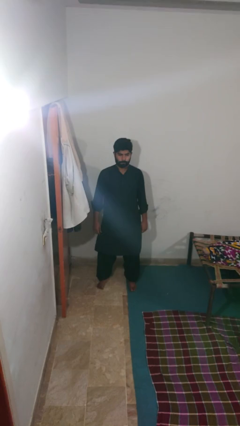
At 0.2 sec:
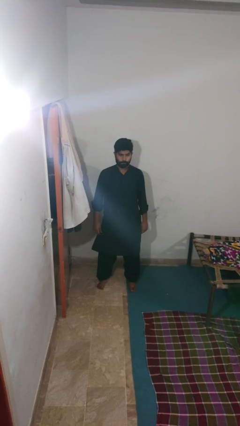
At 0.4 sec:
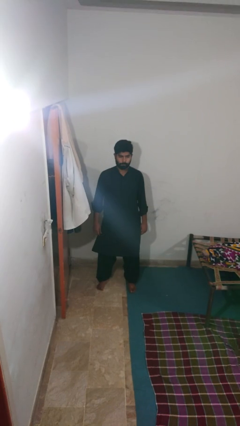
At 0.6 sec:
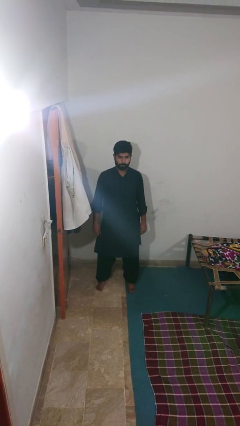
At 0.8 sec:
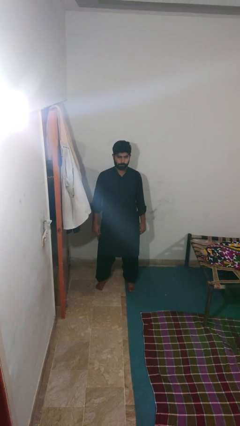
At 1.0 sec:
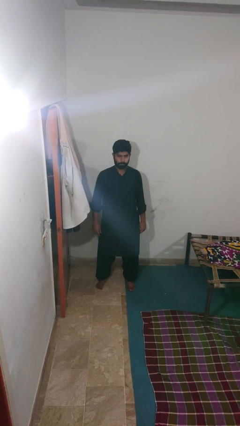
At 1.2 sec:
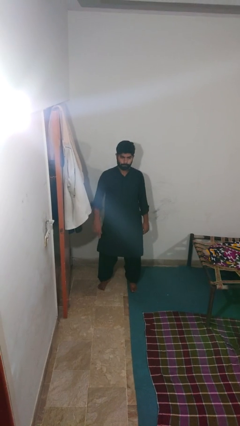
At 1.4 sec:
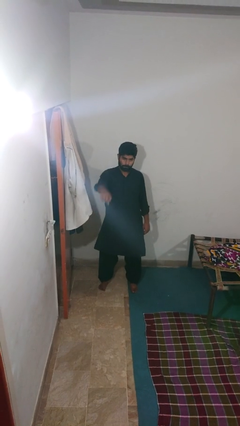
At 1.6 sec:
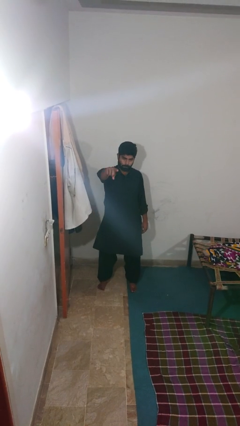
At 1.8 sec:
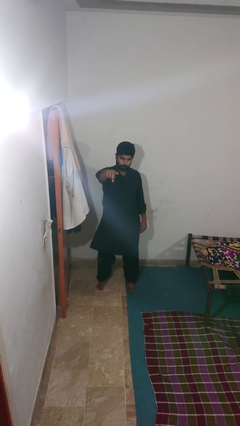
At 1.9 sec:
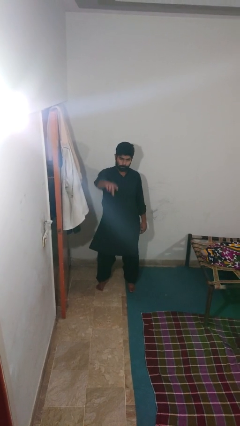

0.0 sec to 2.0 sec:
person points at person

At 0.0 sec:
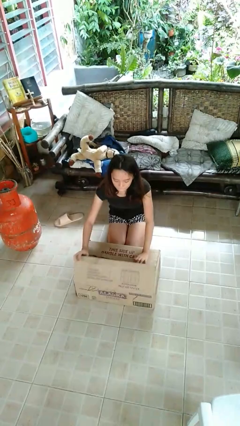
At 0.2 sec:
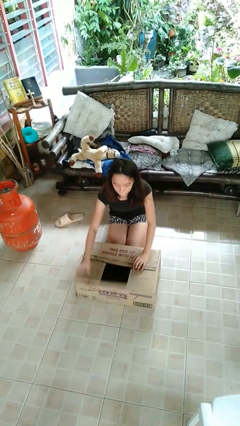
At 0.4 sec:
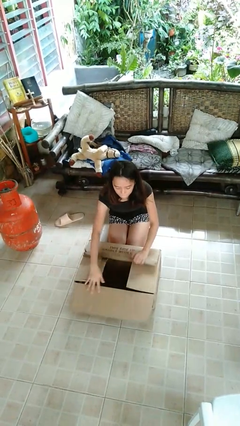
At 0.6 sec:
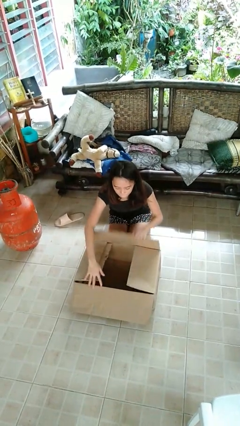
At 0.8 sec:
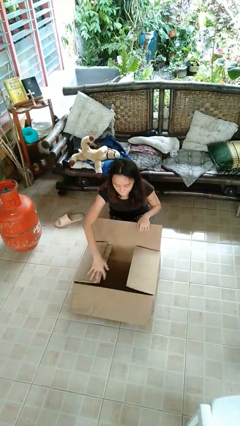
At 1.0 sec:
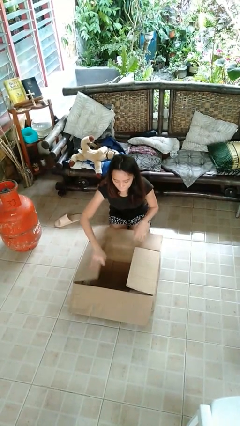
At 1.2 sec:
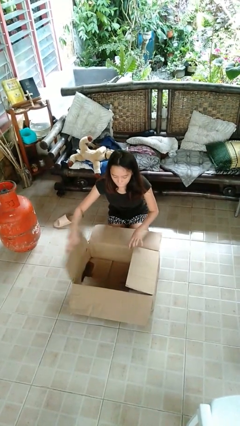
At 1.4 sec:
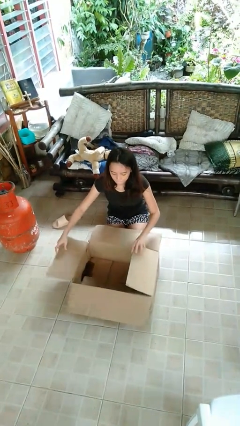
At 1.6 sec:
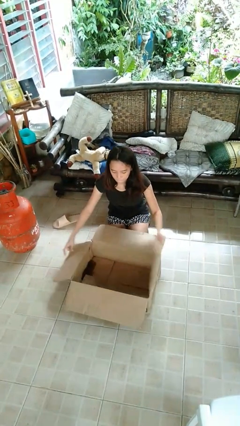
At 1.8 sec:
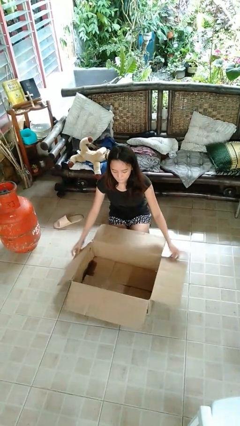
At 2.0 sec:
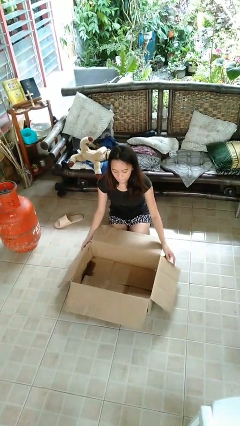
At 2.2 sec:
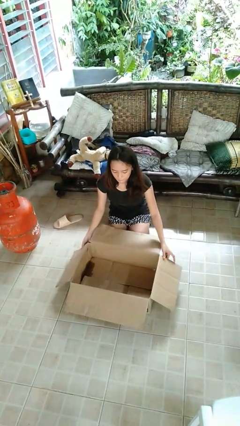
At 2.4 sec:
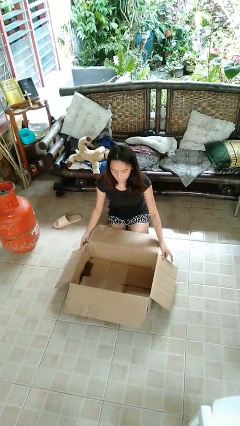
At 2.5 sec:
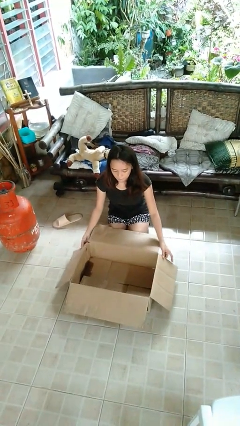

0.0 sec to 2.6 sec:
person opens box

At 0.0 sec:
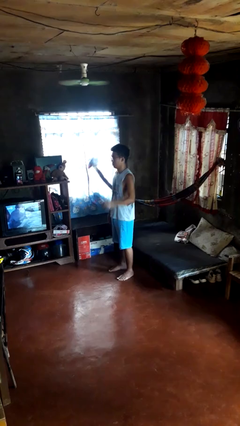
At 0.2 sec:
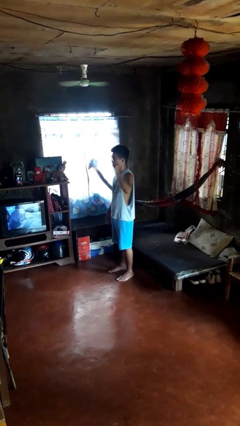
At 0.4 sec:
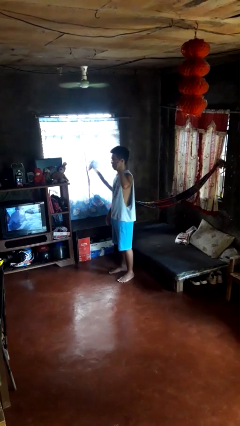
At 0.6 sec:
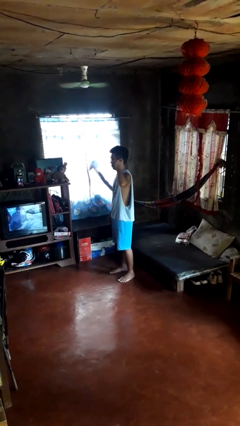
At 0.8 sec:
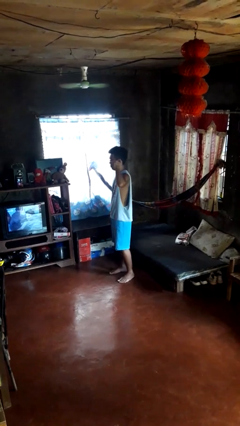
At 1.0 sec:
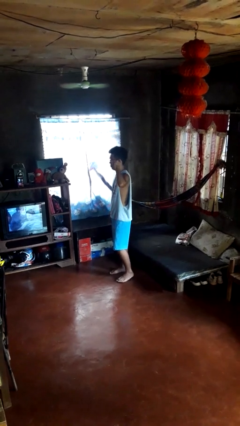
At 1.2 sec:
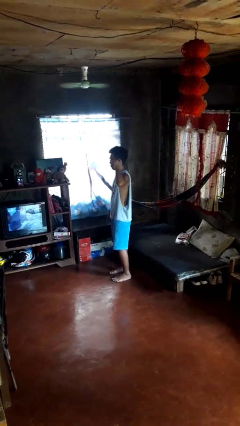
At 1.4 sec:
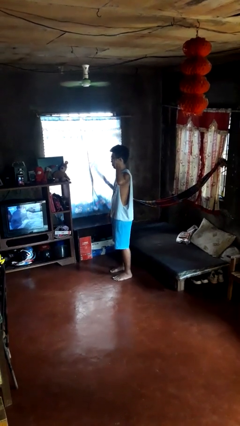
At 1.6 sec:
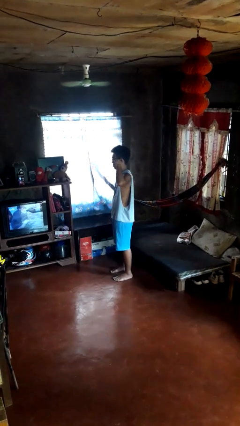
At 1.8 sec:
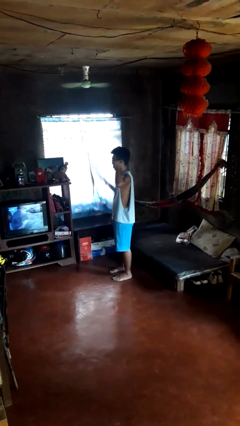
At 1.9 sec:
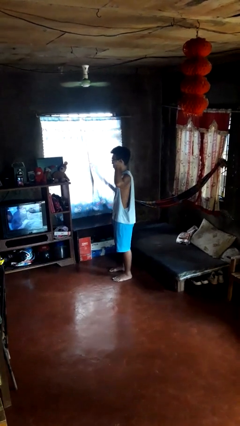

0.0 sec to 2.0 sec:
person gestures listen closely

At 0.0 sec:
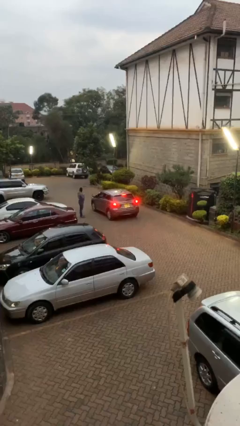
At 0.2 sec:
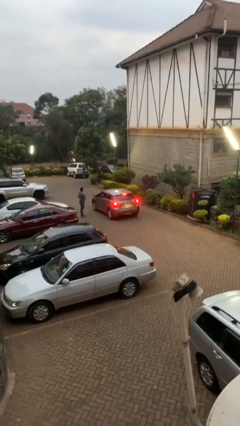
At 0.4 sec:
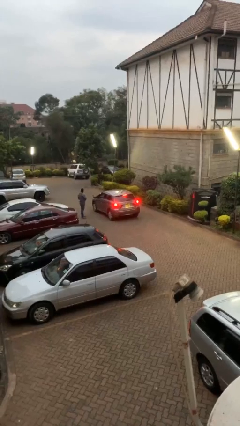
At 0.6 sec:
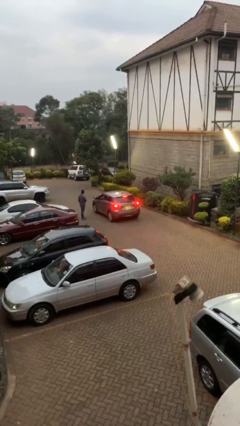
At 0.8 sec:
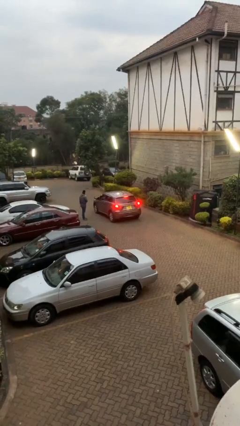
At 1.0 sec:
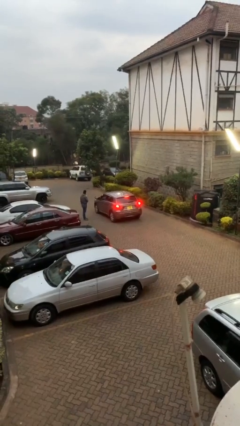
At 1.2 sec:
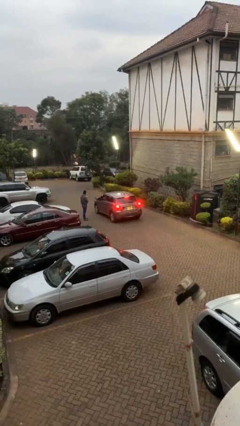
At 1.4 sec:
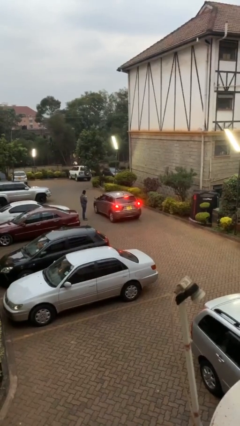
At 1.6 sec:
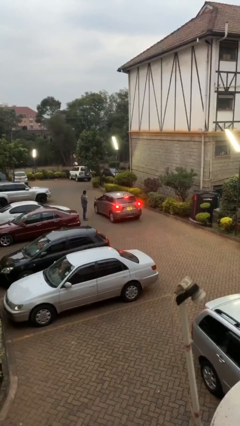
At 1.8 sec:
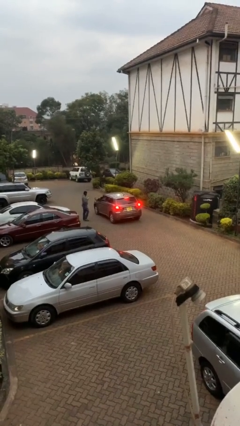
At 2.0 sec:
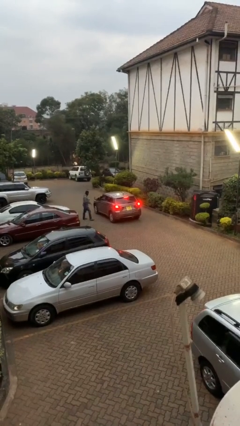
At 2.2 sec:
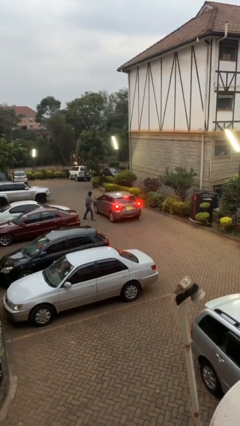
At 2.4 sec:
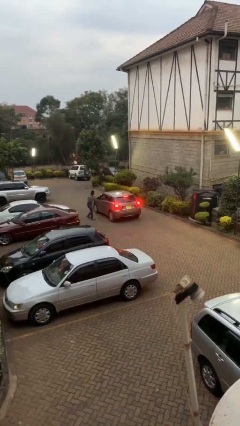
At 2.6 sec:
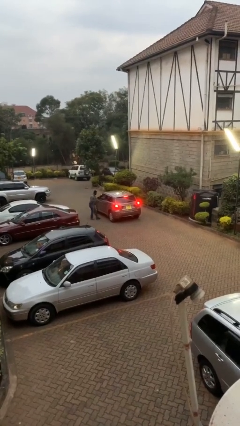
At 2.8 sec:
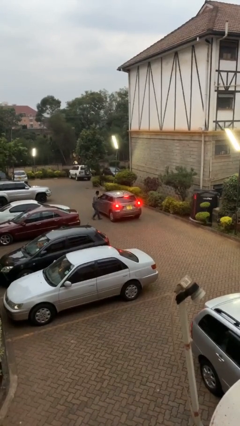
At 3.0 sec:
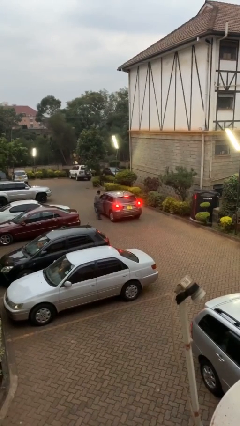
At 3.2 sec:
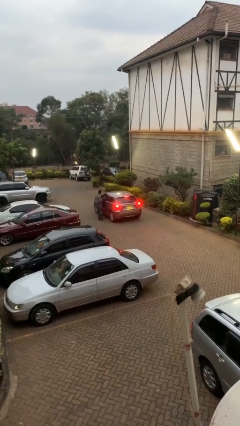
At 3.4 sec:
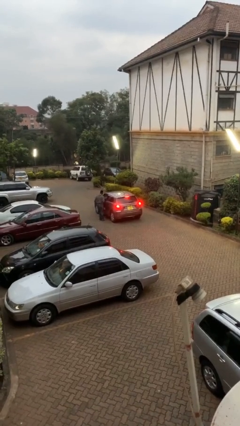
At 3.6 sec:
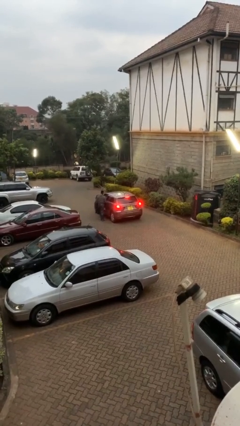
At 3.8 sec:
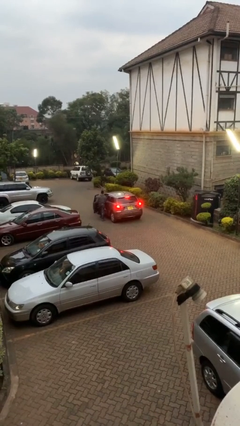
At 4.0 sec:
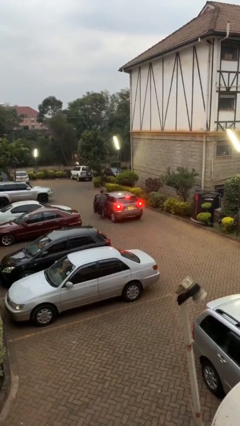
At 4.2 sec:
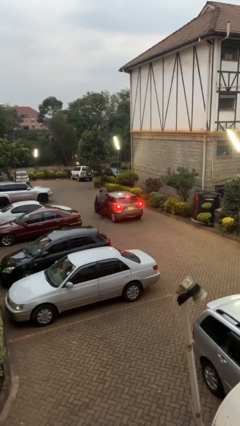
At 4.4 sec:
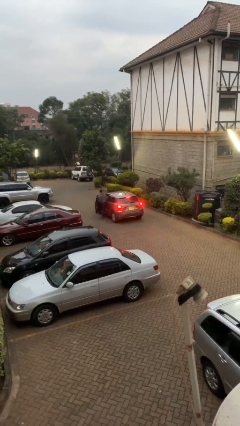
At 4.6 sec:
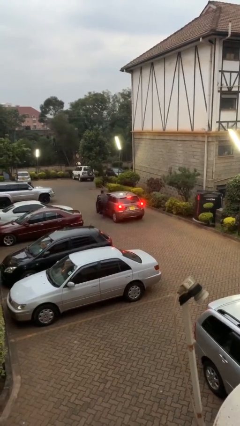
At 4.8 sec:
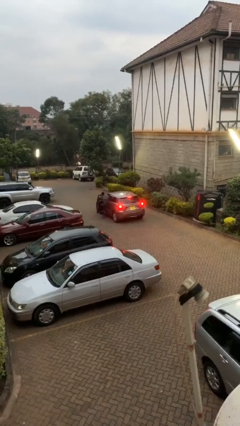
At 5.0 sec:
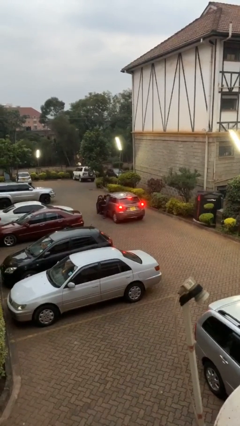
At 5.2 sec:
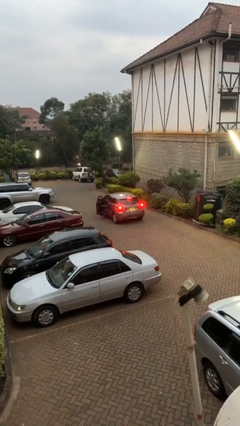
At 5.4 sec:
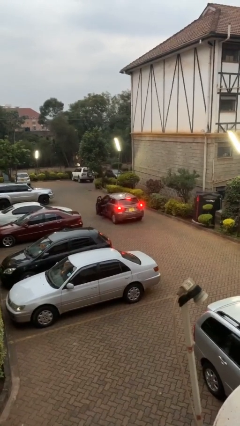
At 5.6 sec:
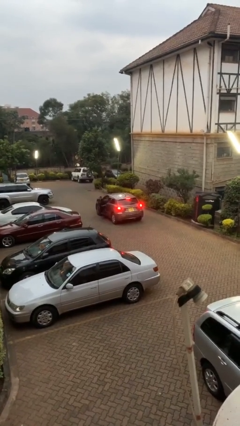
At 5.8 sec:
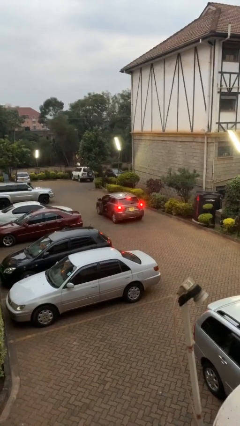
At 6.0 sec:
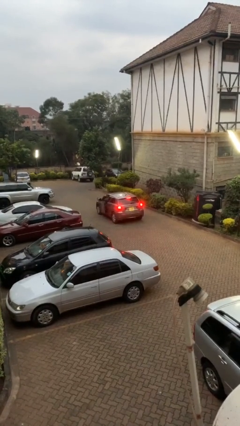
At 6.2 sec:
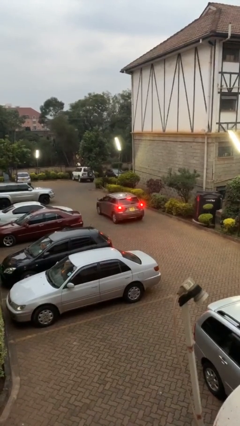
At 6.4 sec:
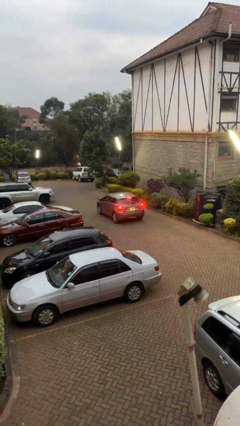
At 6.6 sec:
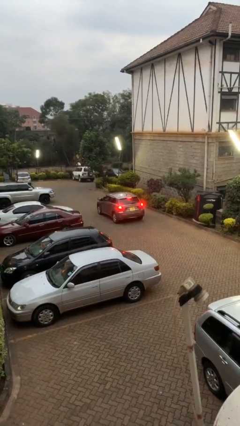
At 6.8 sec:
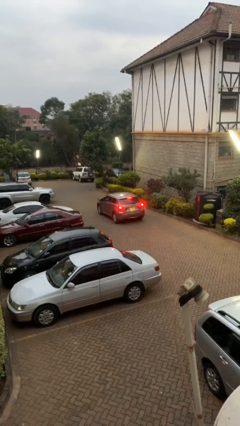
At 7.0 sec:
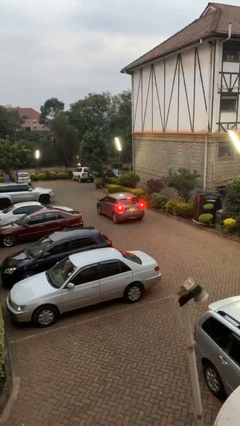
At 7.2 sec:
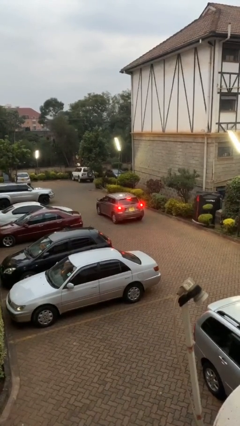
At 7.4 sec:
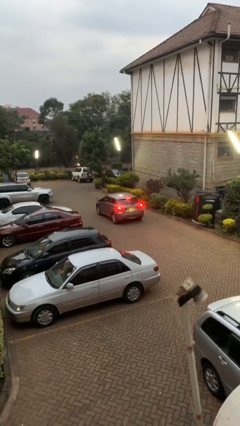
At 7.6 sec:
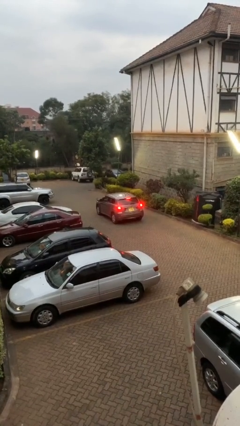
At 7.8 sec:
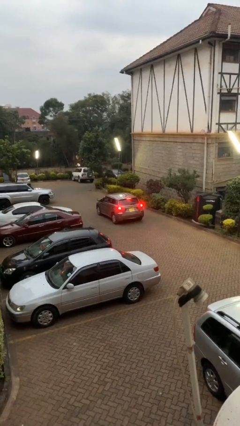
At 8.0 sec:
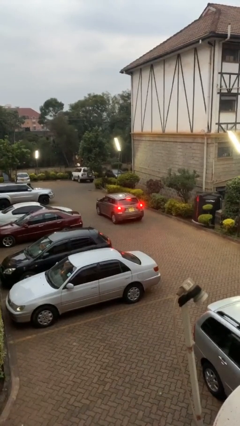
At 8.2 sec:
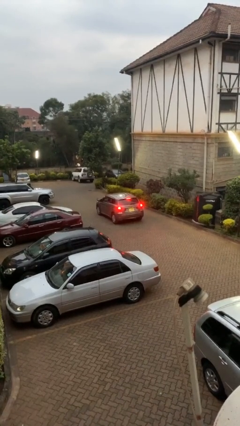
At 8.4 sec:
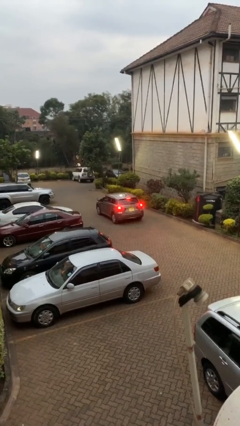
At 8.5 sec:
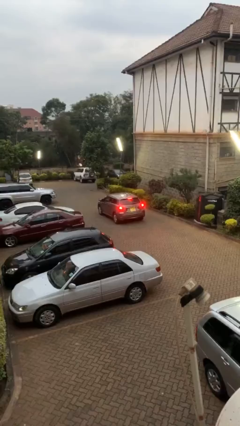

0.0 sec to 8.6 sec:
car picks up person

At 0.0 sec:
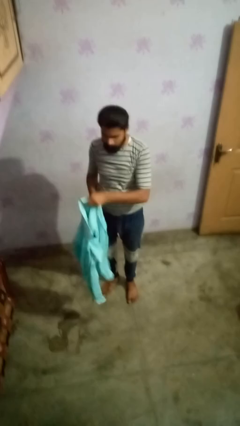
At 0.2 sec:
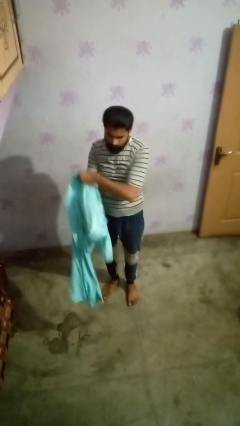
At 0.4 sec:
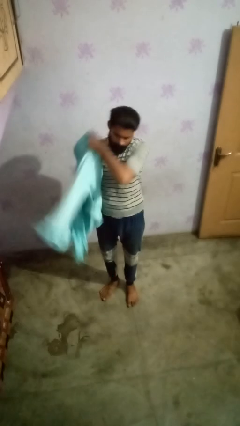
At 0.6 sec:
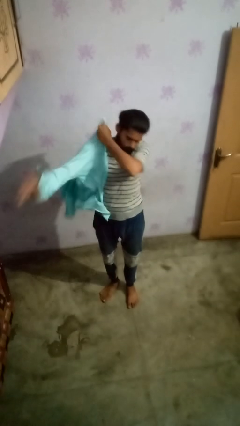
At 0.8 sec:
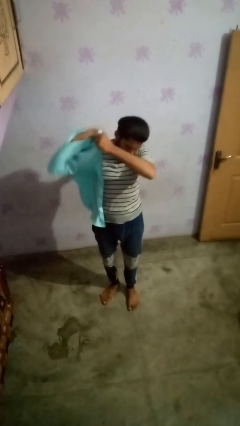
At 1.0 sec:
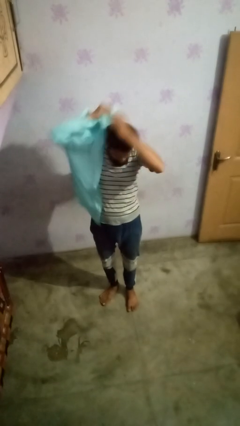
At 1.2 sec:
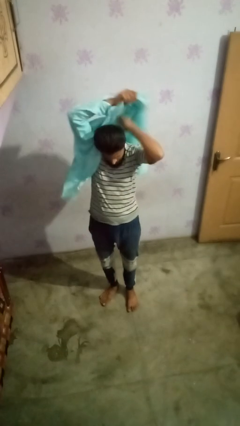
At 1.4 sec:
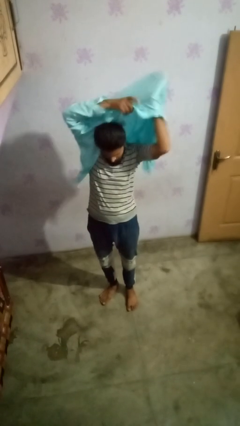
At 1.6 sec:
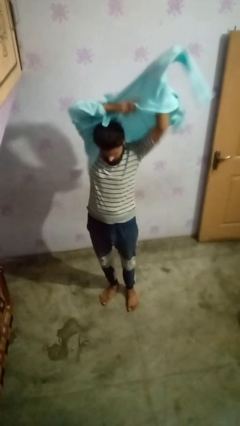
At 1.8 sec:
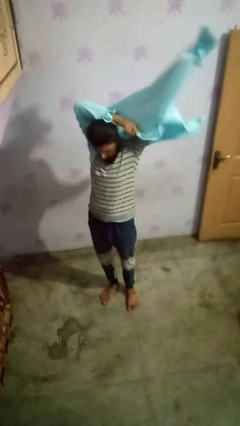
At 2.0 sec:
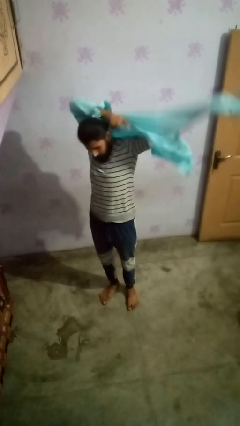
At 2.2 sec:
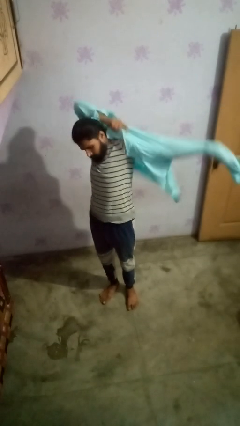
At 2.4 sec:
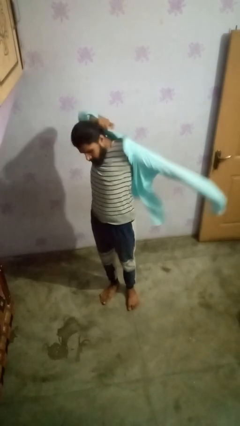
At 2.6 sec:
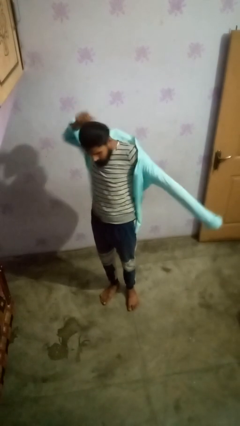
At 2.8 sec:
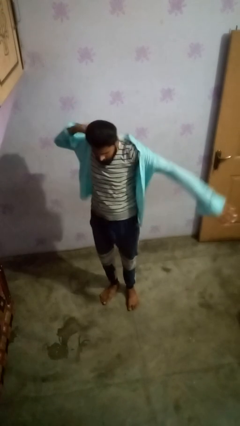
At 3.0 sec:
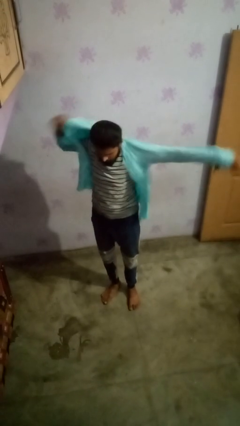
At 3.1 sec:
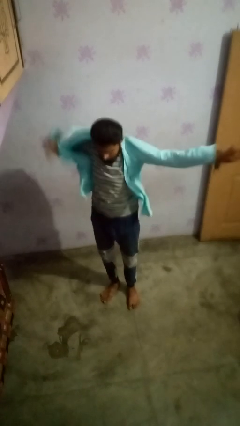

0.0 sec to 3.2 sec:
person puts on shirt
